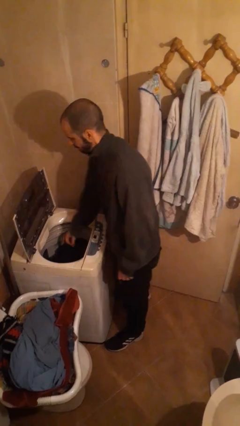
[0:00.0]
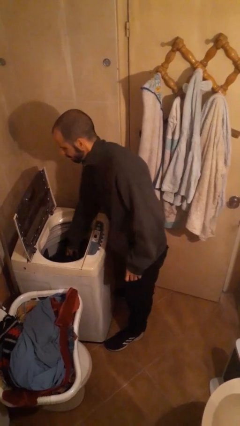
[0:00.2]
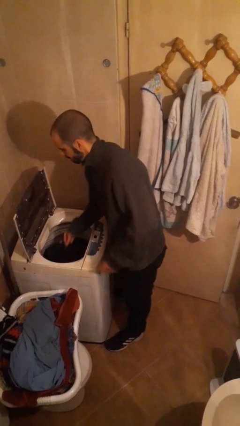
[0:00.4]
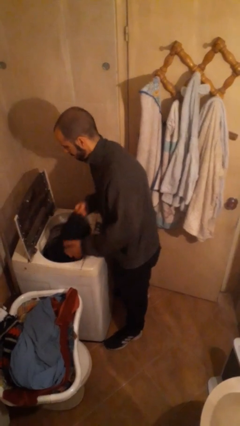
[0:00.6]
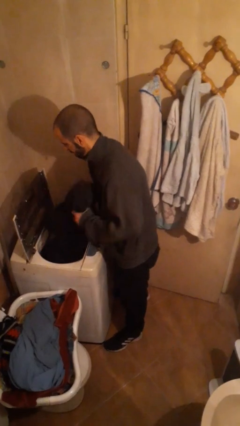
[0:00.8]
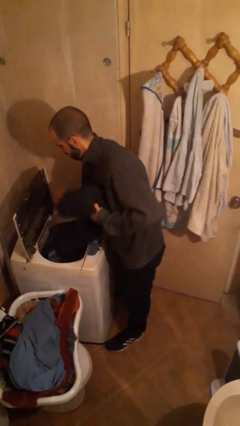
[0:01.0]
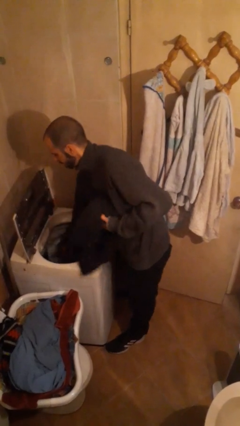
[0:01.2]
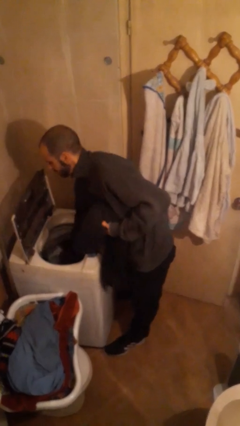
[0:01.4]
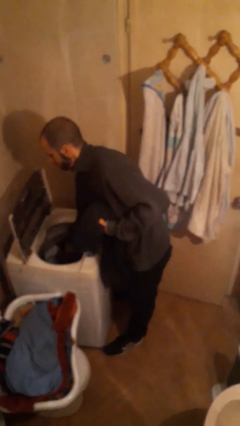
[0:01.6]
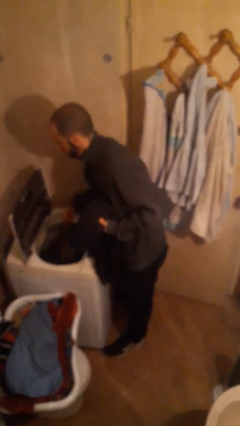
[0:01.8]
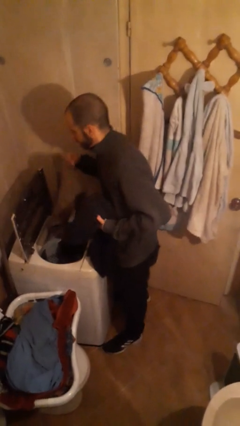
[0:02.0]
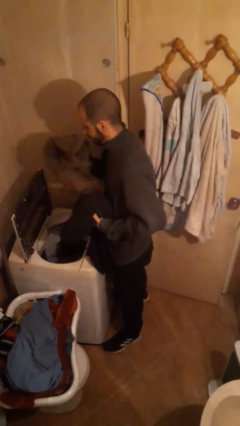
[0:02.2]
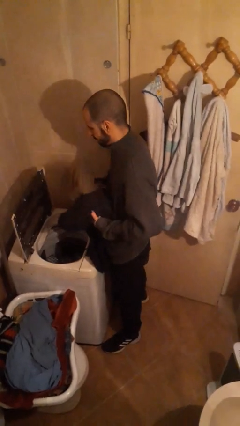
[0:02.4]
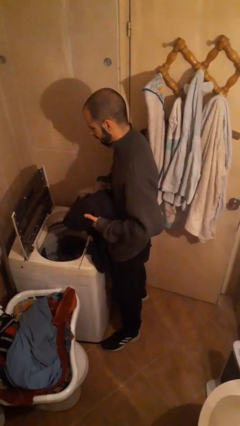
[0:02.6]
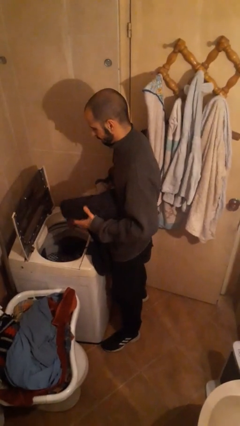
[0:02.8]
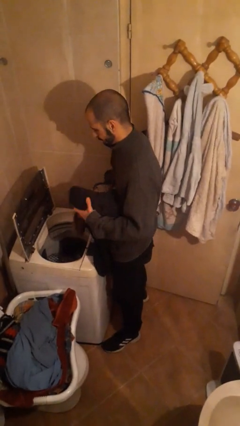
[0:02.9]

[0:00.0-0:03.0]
person loads clotheswasher

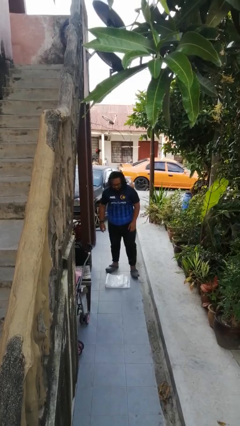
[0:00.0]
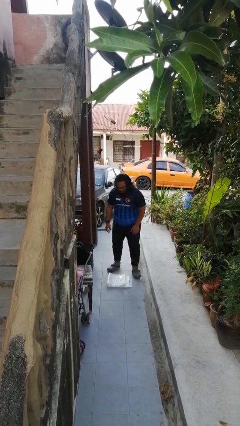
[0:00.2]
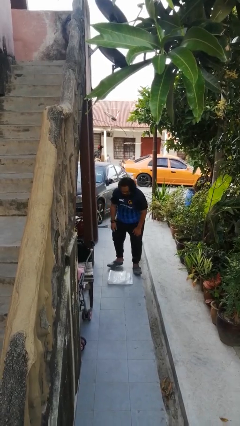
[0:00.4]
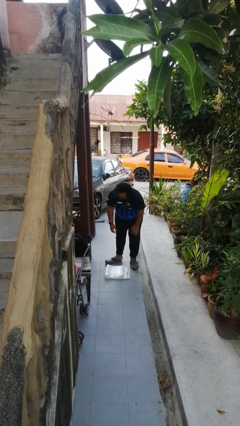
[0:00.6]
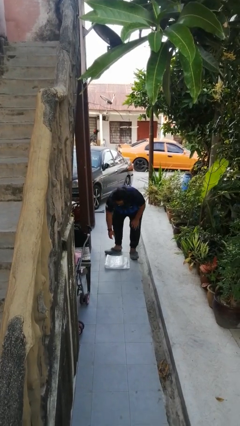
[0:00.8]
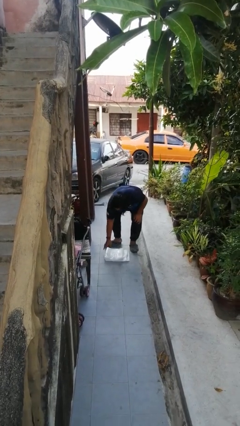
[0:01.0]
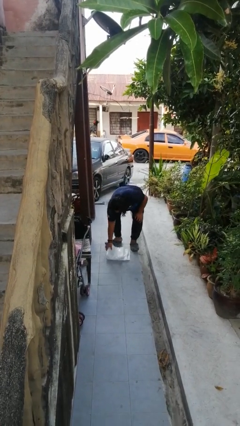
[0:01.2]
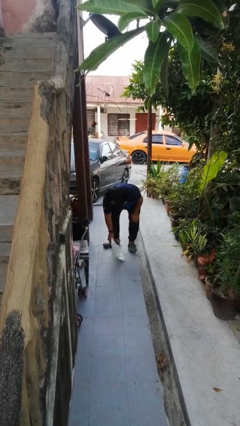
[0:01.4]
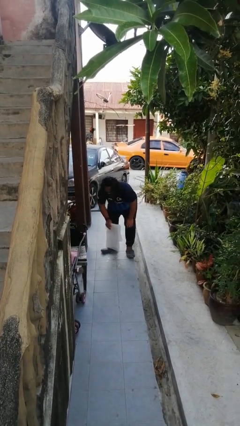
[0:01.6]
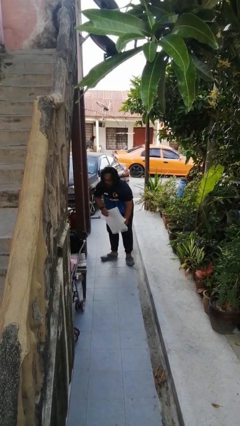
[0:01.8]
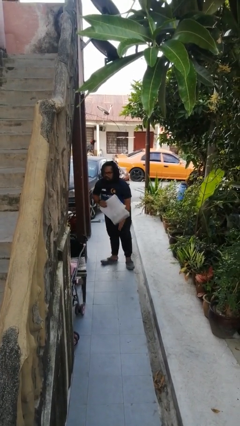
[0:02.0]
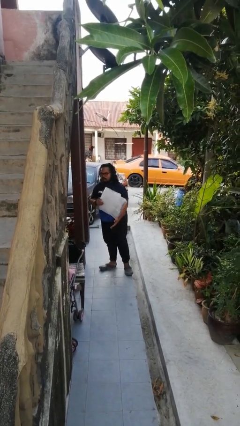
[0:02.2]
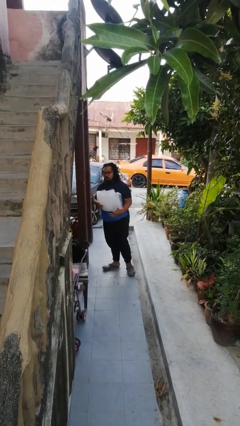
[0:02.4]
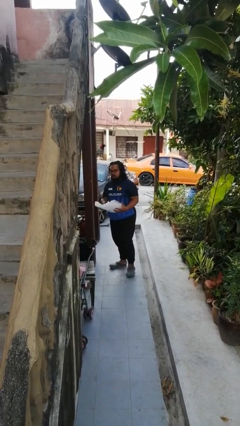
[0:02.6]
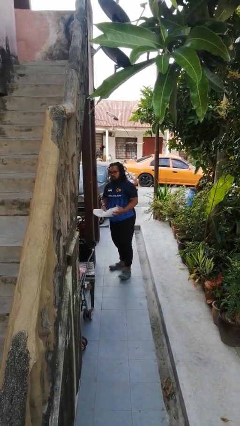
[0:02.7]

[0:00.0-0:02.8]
person picks up object from floor

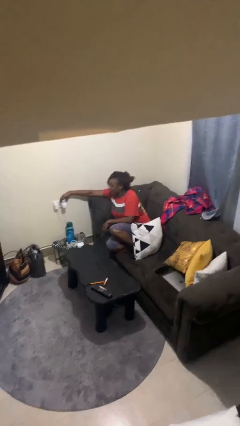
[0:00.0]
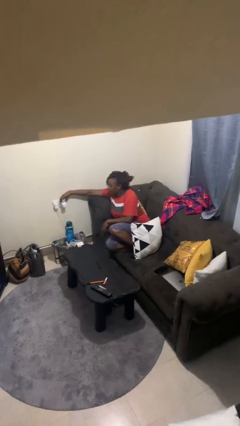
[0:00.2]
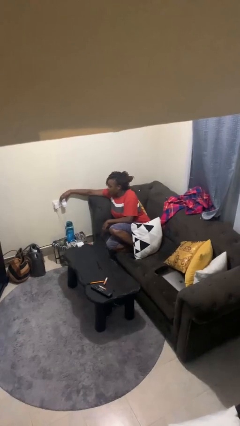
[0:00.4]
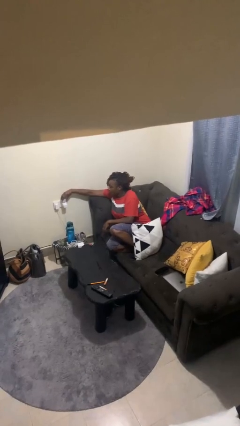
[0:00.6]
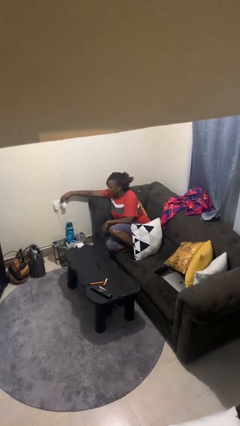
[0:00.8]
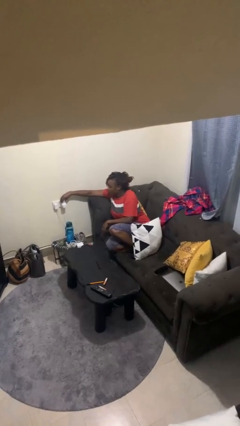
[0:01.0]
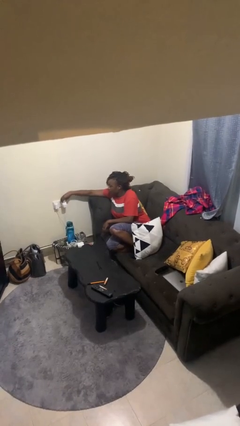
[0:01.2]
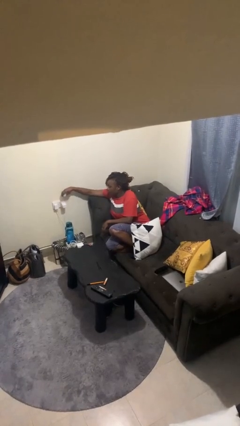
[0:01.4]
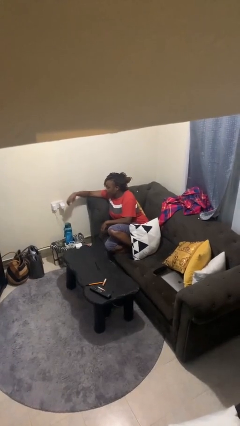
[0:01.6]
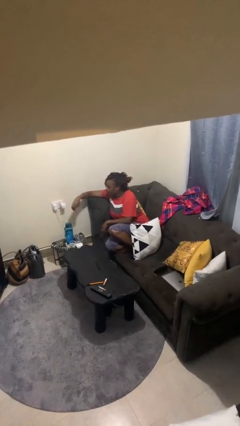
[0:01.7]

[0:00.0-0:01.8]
person unplugs from electrical socket

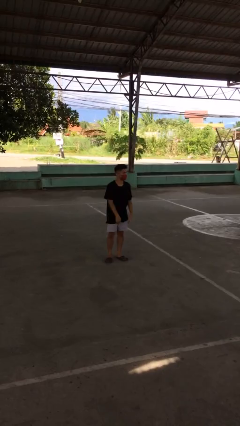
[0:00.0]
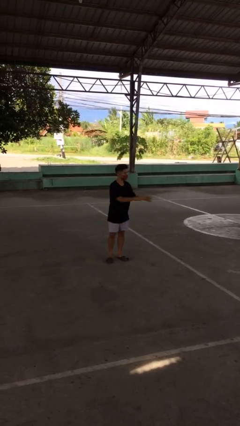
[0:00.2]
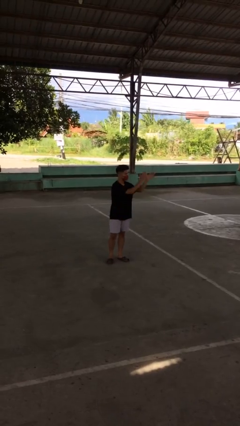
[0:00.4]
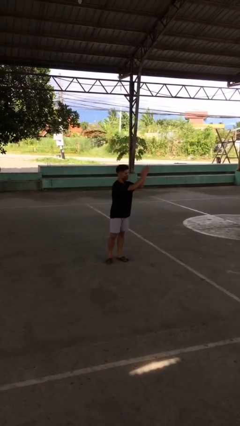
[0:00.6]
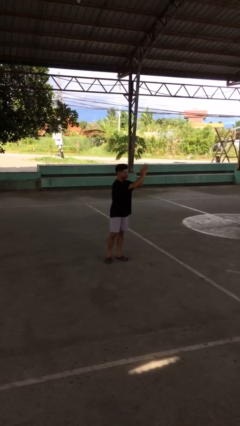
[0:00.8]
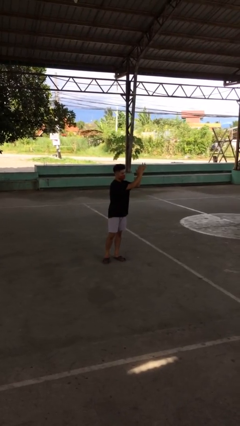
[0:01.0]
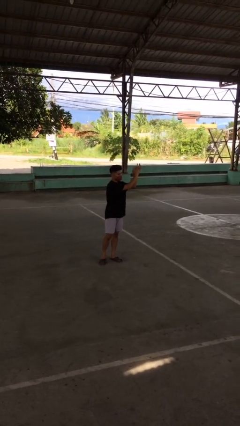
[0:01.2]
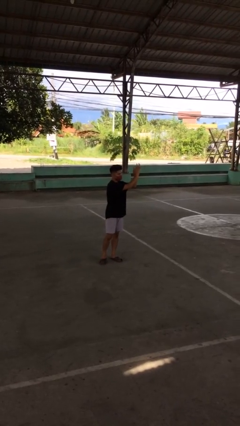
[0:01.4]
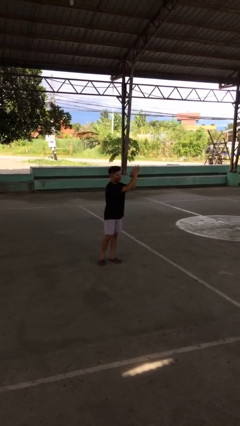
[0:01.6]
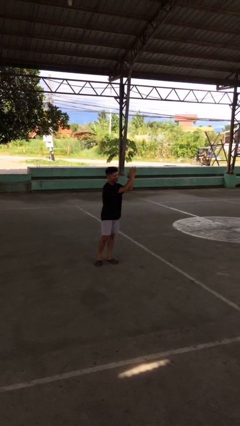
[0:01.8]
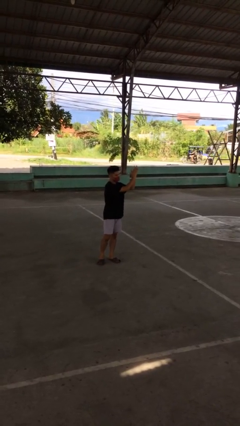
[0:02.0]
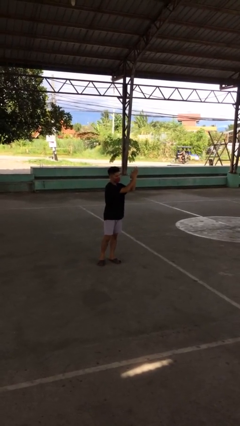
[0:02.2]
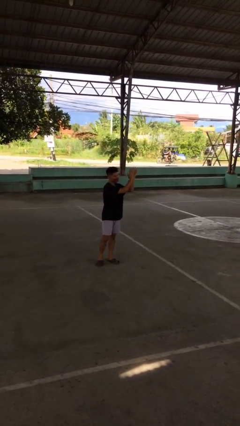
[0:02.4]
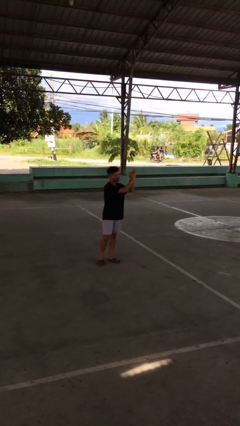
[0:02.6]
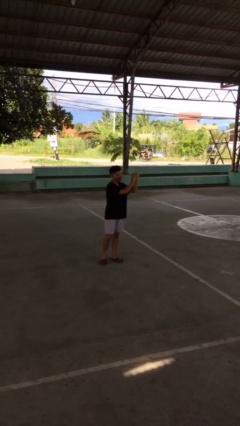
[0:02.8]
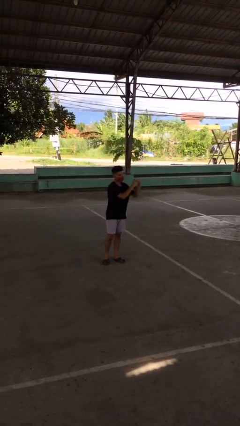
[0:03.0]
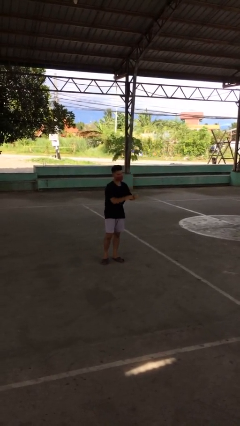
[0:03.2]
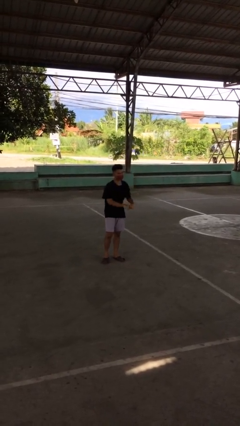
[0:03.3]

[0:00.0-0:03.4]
person claps hands

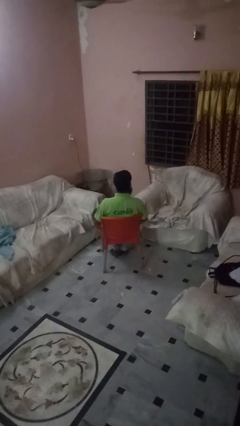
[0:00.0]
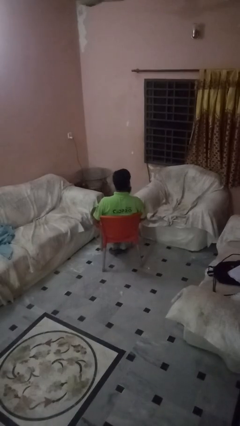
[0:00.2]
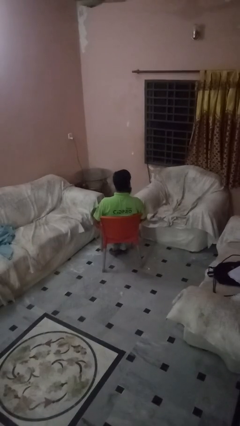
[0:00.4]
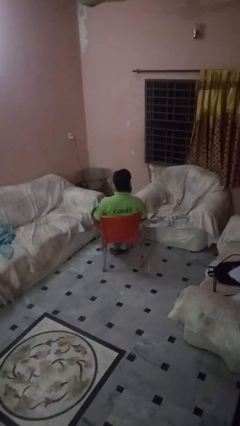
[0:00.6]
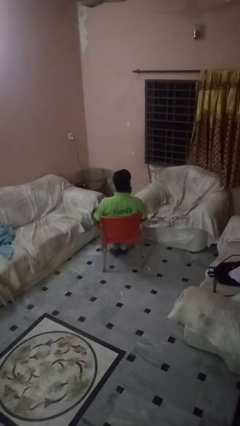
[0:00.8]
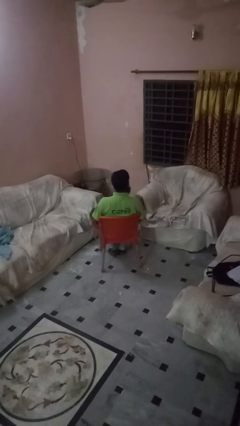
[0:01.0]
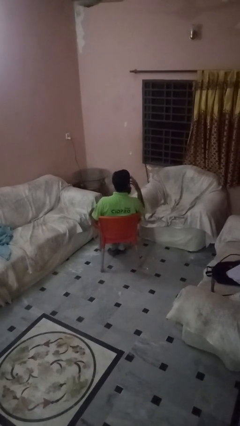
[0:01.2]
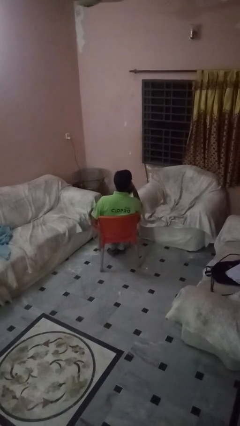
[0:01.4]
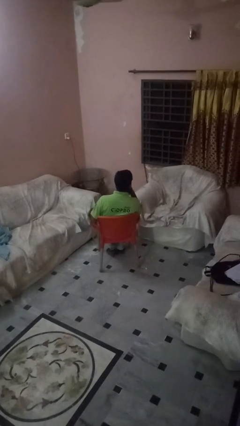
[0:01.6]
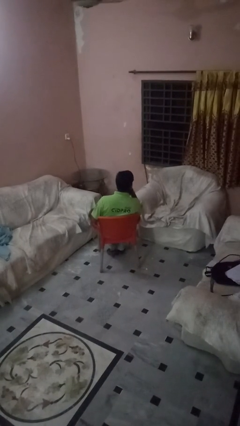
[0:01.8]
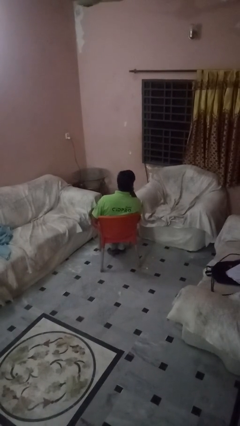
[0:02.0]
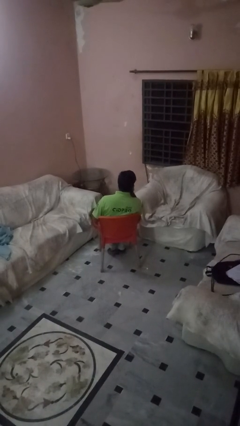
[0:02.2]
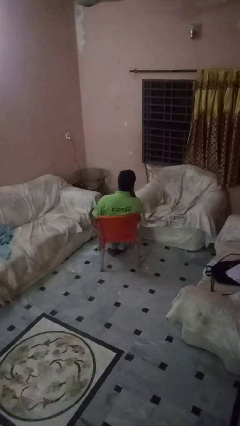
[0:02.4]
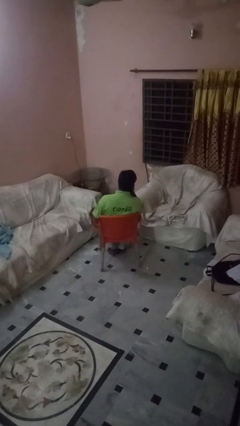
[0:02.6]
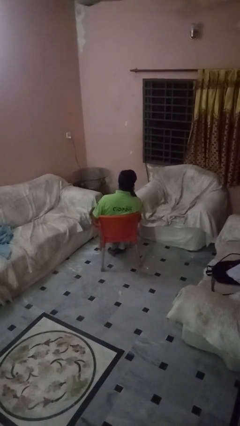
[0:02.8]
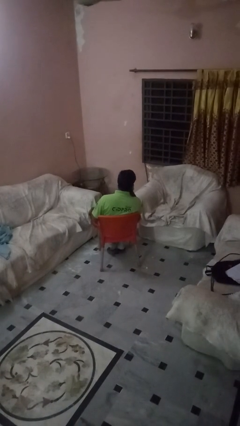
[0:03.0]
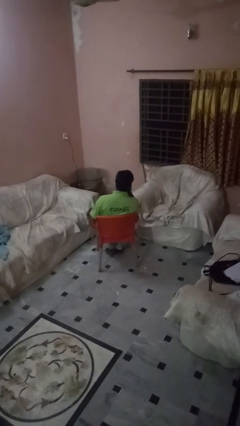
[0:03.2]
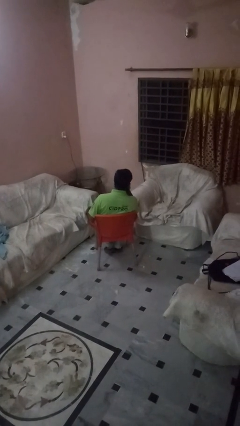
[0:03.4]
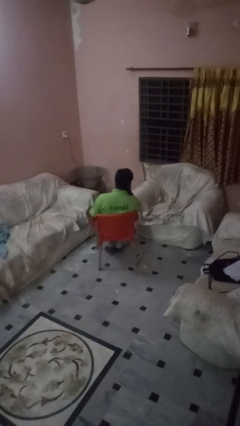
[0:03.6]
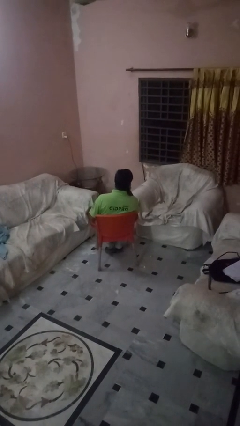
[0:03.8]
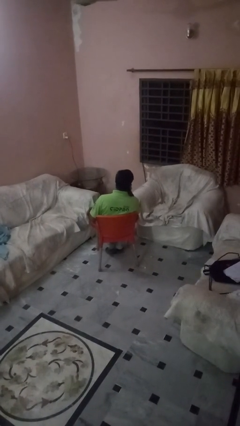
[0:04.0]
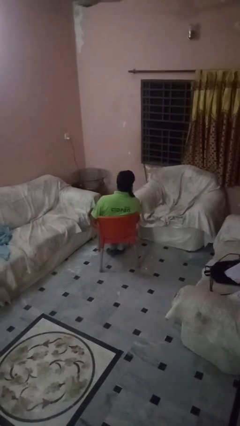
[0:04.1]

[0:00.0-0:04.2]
person strokes chin

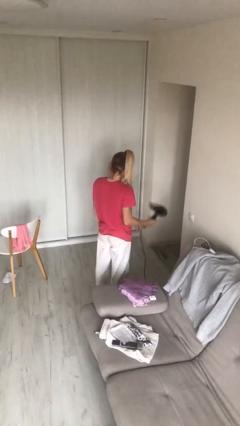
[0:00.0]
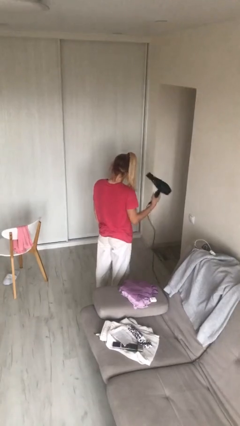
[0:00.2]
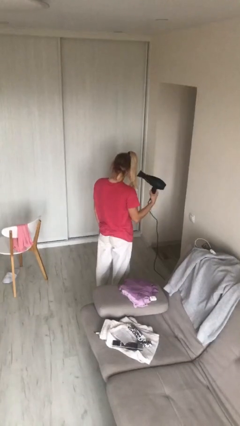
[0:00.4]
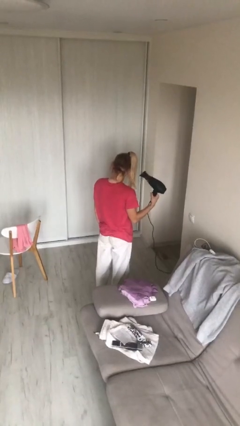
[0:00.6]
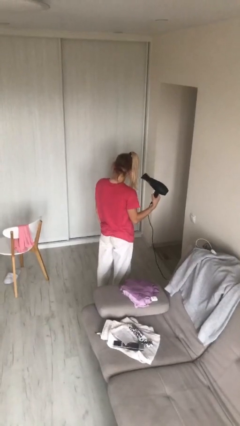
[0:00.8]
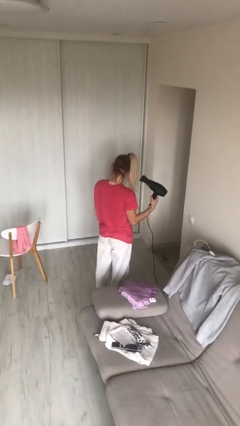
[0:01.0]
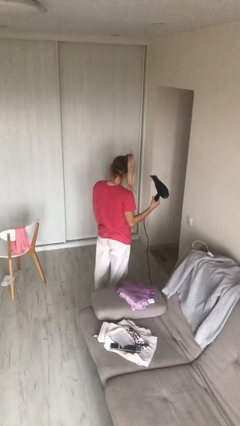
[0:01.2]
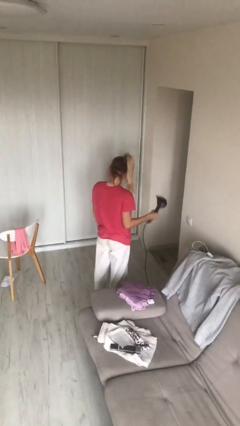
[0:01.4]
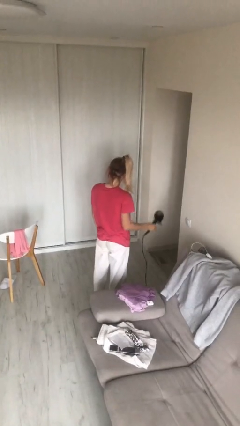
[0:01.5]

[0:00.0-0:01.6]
person dries hair with hairdryer

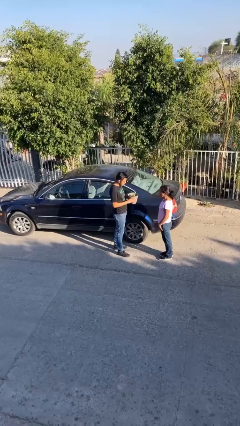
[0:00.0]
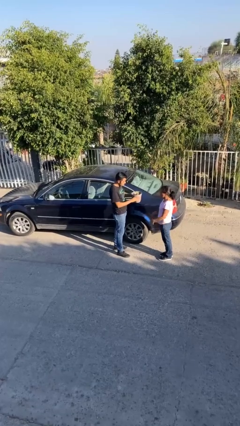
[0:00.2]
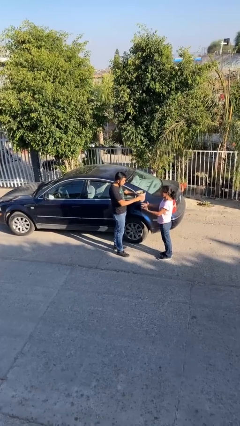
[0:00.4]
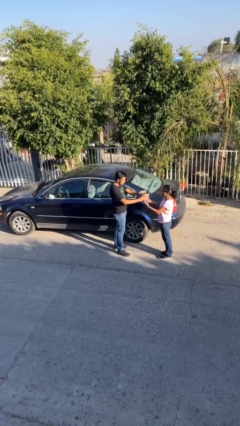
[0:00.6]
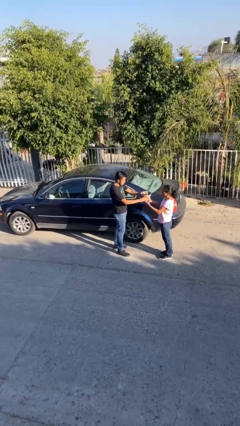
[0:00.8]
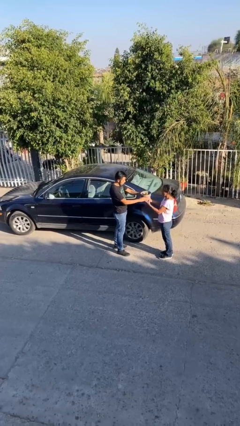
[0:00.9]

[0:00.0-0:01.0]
person transfers object to person
